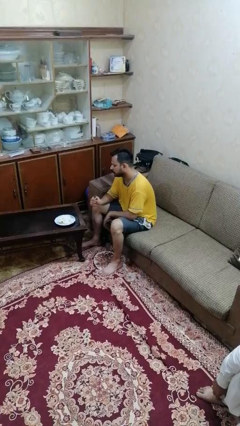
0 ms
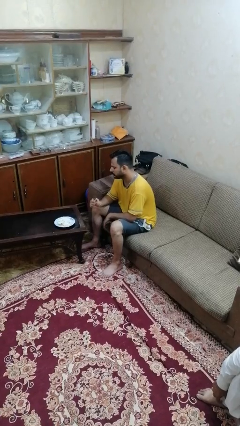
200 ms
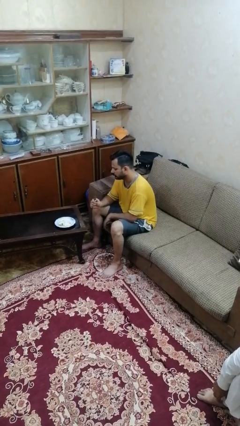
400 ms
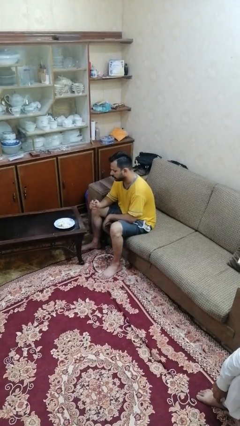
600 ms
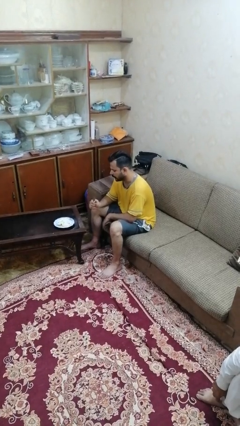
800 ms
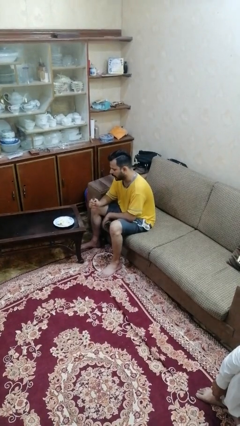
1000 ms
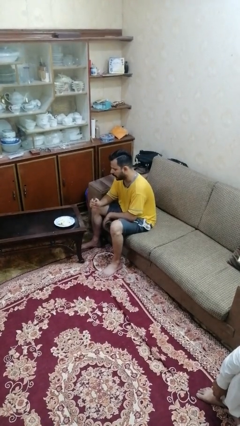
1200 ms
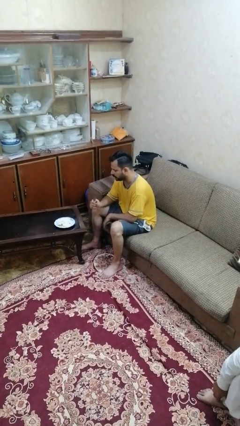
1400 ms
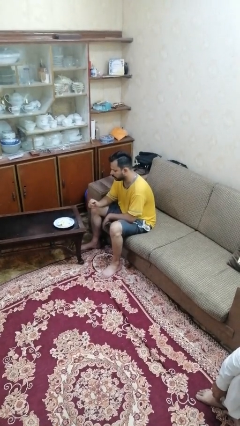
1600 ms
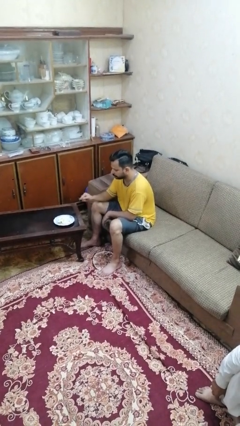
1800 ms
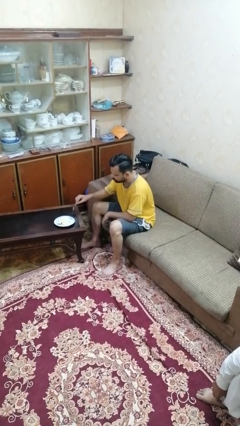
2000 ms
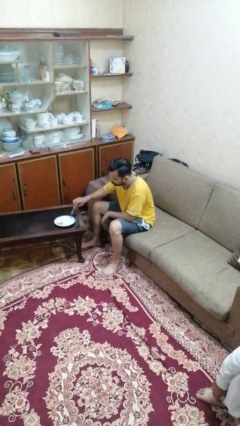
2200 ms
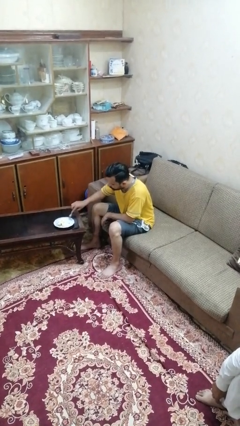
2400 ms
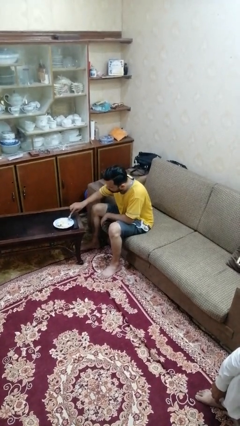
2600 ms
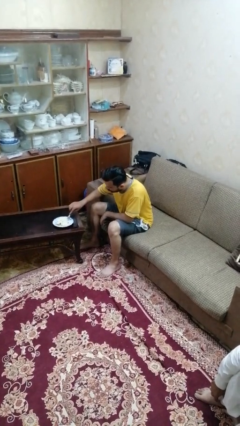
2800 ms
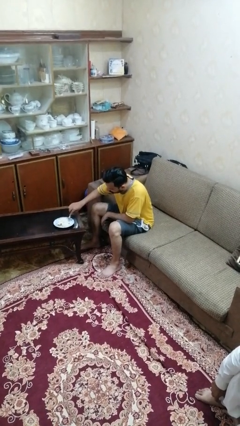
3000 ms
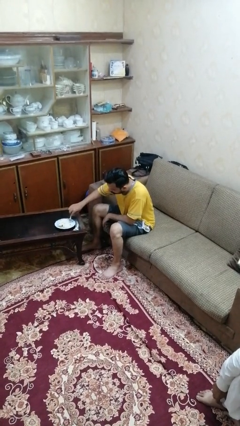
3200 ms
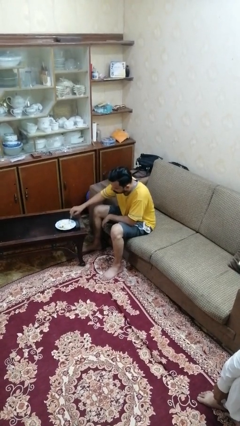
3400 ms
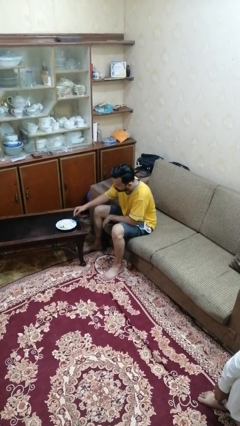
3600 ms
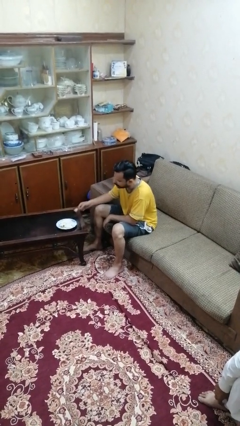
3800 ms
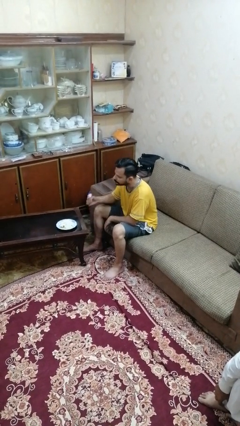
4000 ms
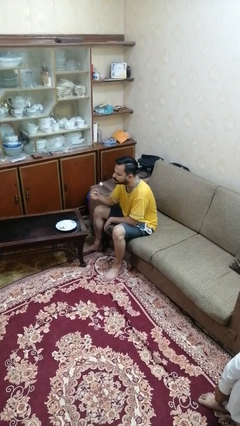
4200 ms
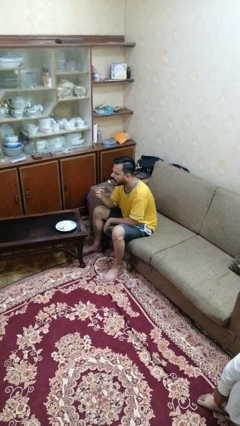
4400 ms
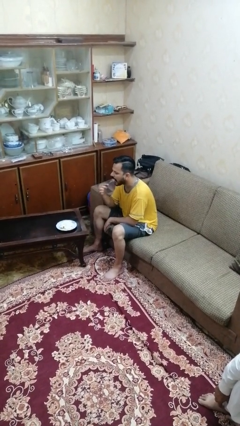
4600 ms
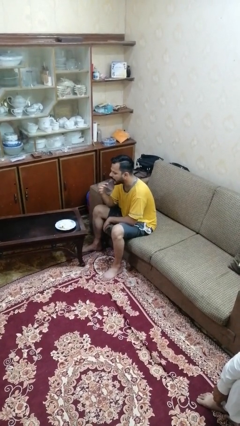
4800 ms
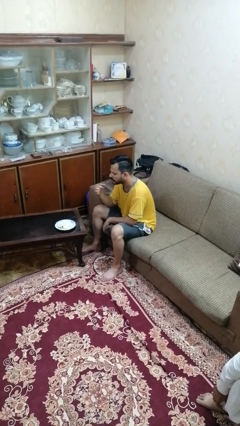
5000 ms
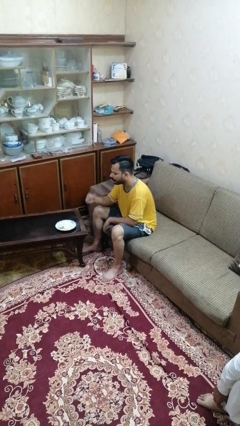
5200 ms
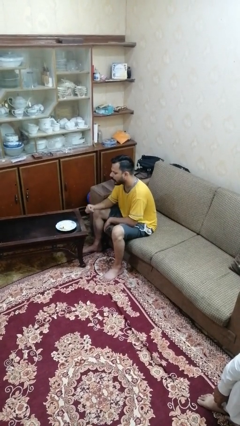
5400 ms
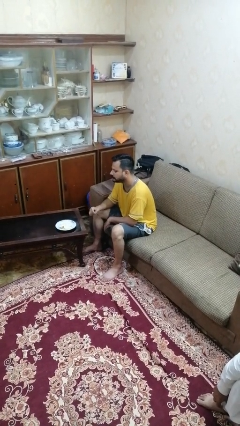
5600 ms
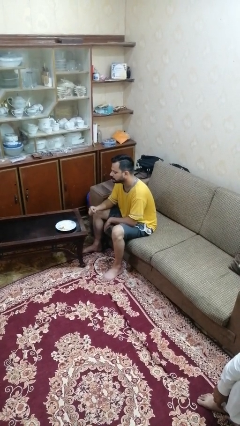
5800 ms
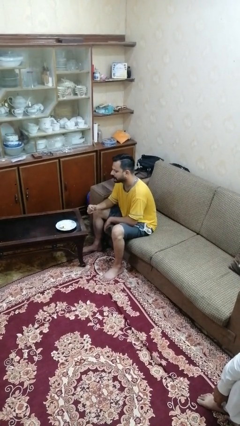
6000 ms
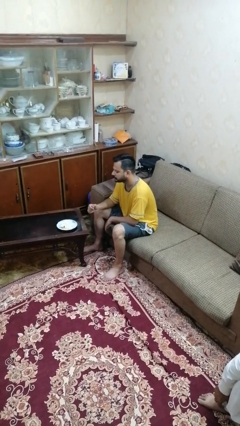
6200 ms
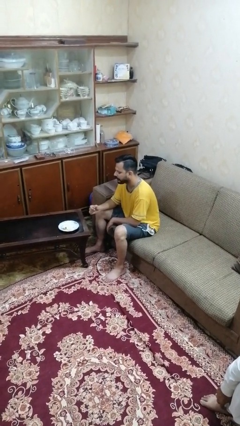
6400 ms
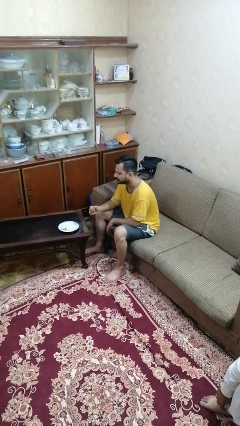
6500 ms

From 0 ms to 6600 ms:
person eats with utensil

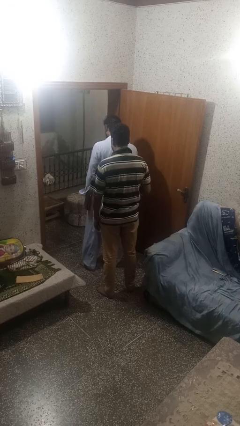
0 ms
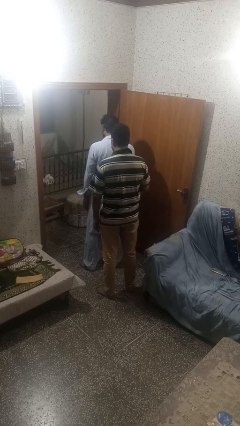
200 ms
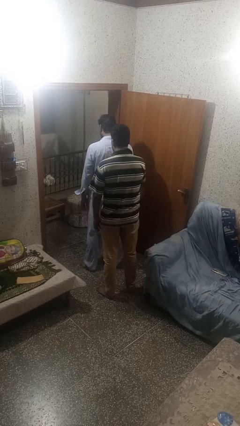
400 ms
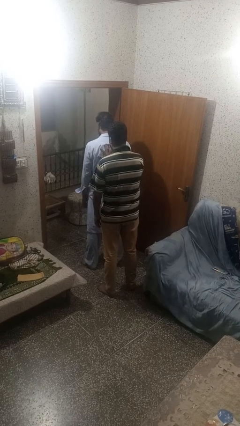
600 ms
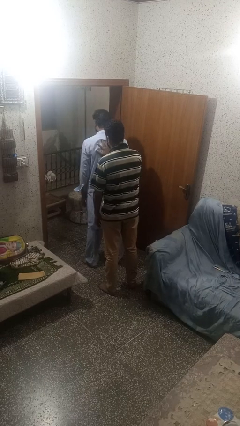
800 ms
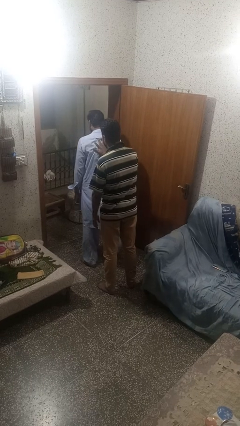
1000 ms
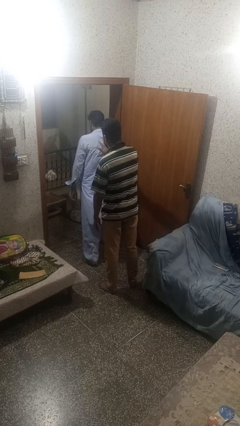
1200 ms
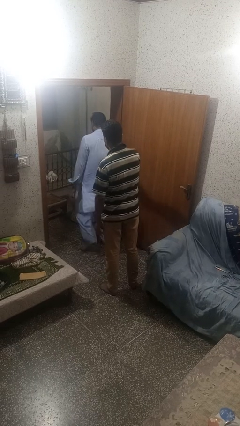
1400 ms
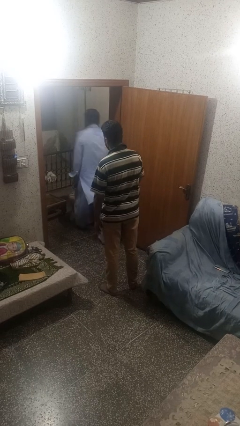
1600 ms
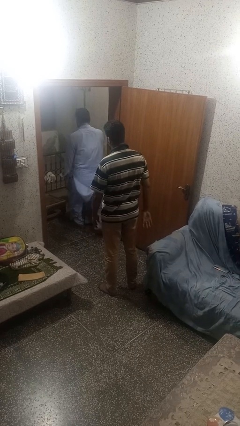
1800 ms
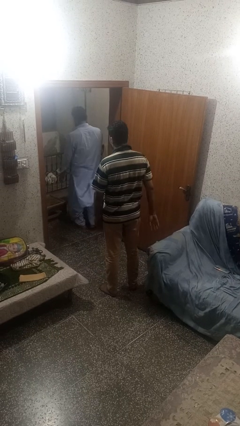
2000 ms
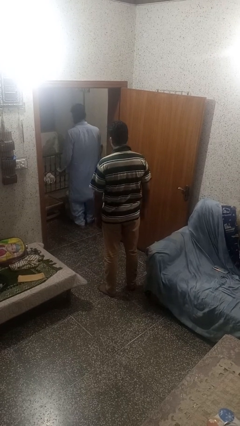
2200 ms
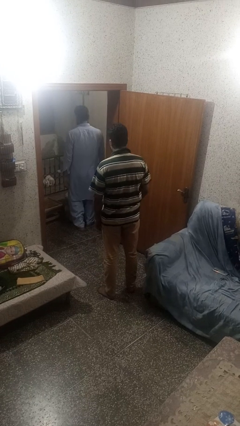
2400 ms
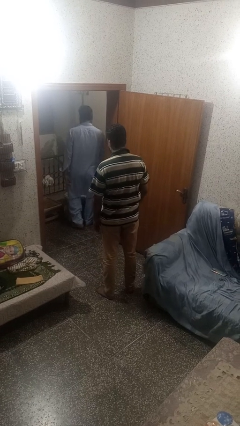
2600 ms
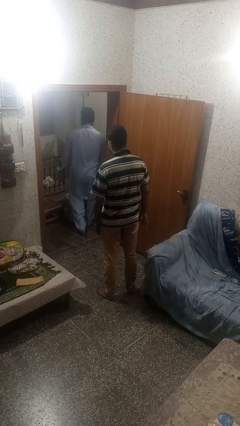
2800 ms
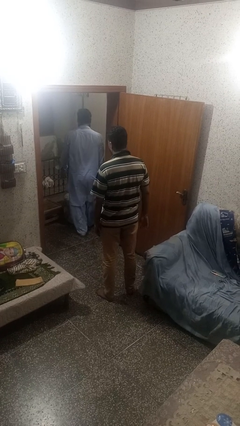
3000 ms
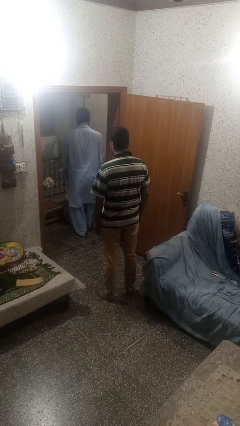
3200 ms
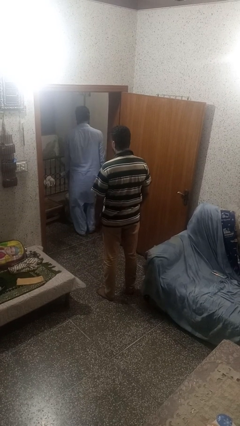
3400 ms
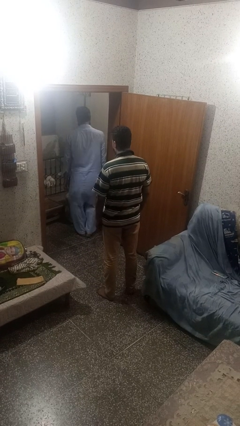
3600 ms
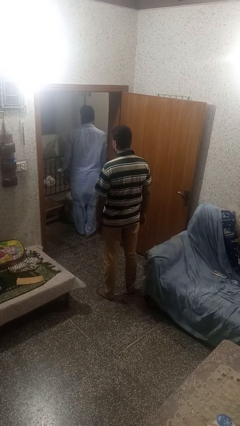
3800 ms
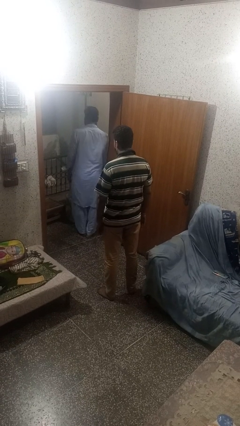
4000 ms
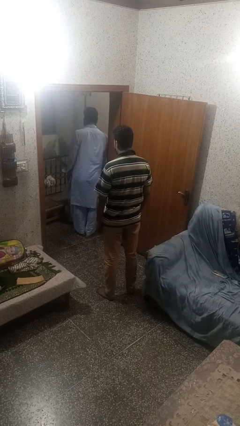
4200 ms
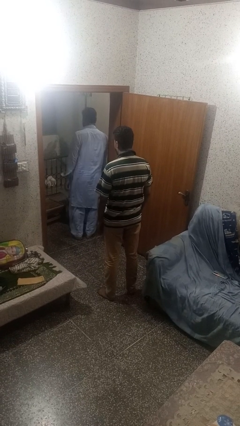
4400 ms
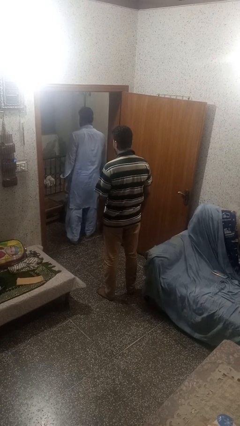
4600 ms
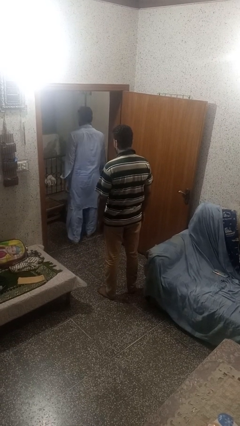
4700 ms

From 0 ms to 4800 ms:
person shoves person

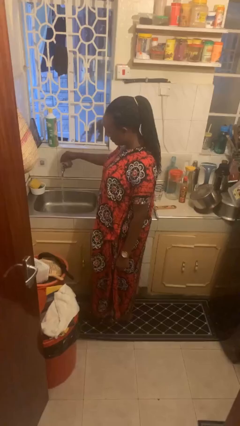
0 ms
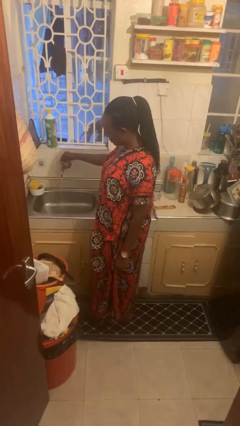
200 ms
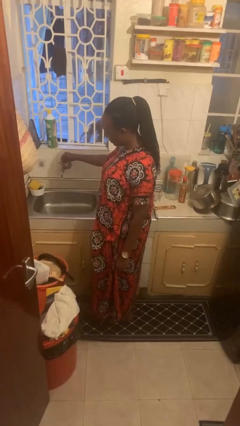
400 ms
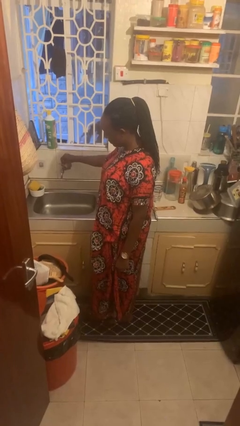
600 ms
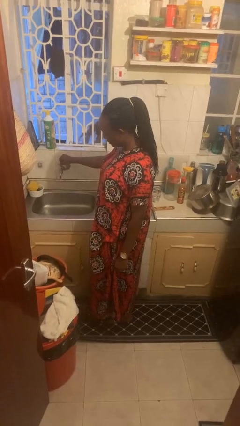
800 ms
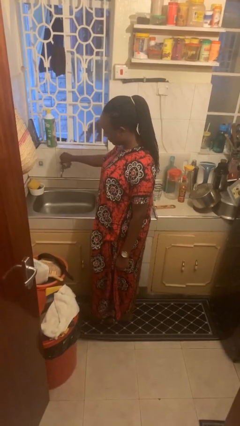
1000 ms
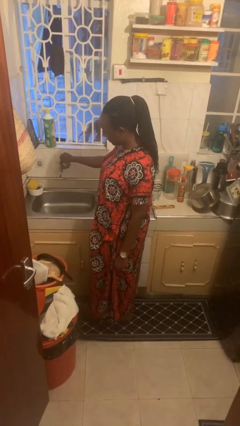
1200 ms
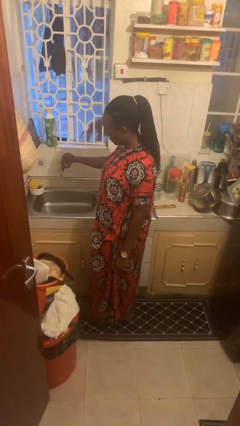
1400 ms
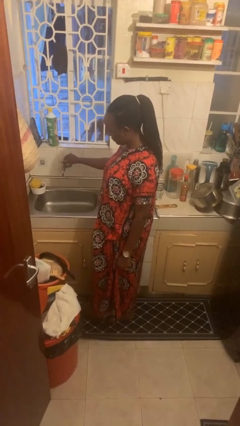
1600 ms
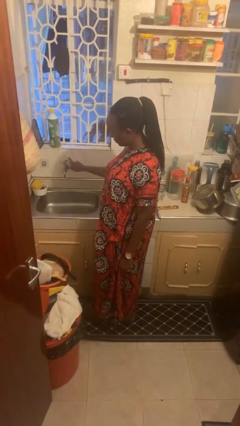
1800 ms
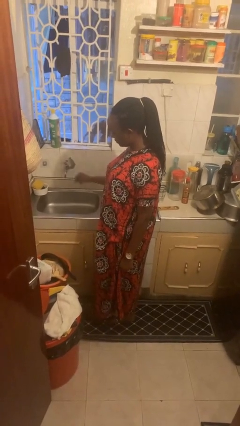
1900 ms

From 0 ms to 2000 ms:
person turns off faucet

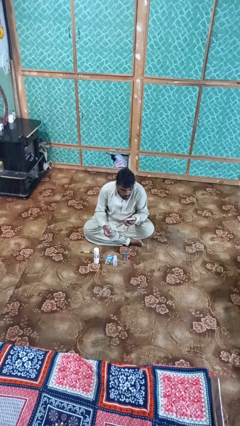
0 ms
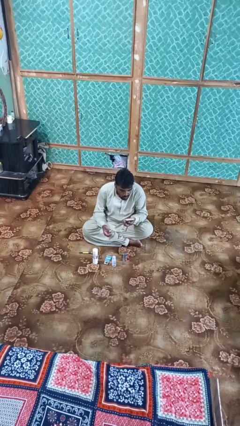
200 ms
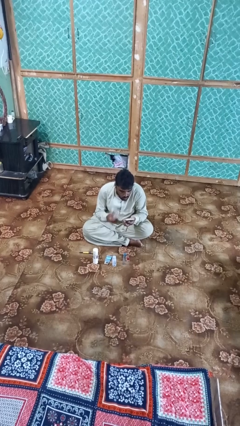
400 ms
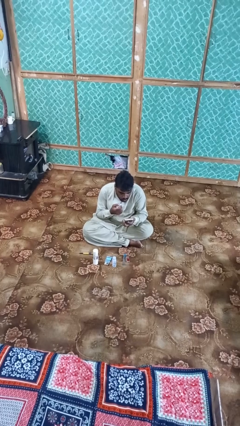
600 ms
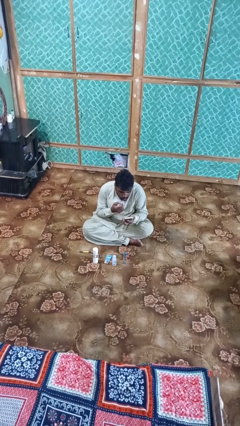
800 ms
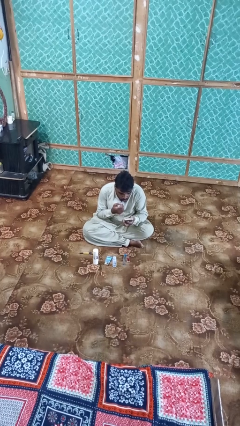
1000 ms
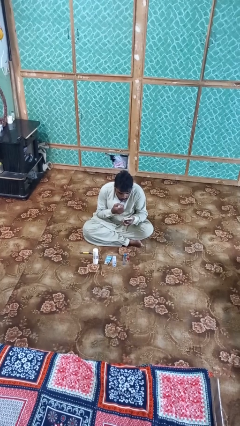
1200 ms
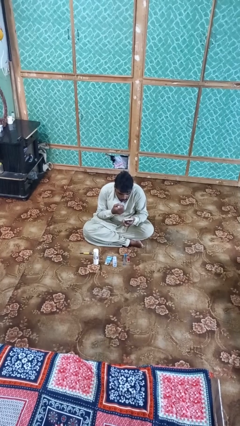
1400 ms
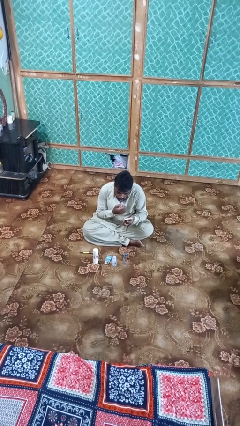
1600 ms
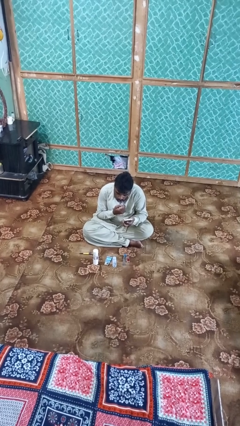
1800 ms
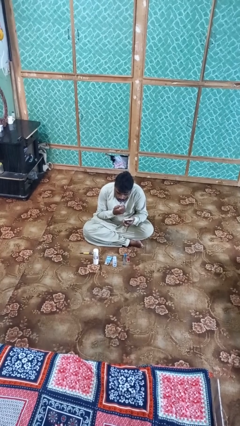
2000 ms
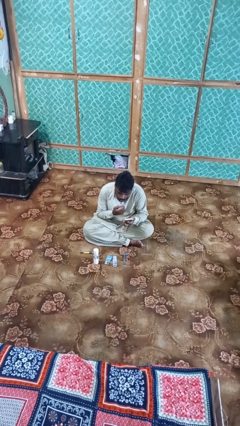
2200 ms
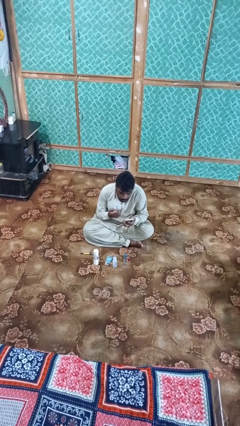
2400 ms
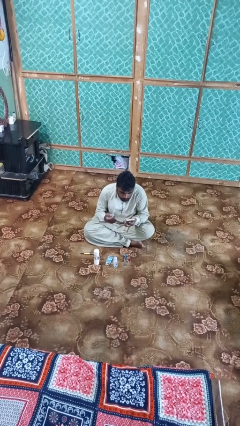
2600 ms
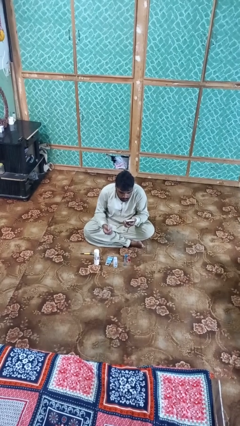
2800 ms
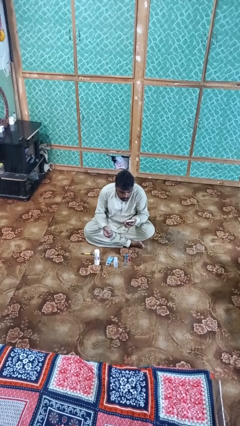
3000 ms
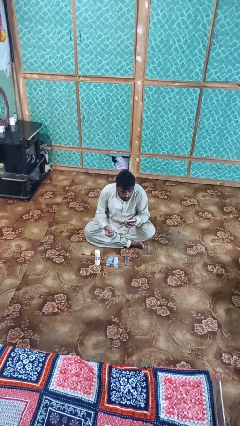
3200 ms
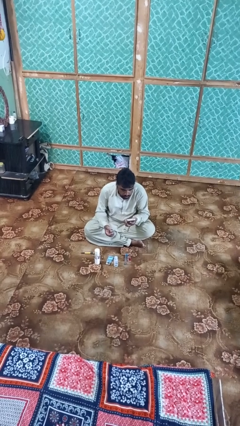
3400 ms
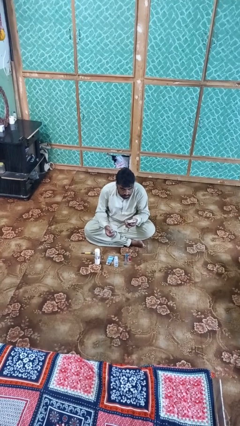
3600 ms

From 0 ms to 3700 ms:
person applies lip makeup

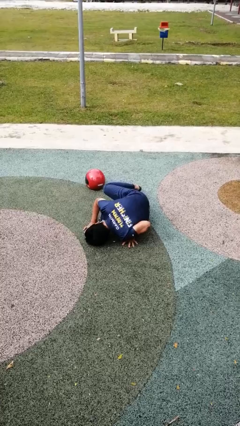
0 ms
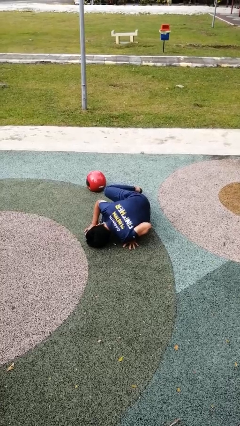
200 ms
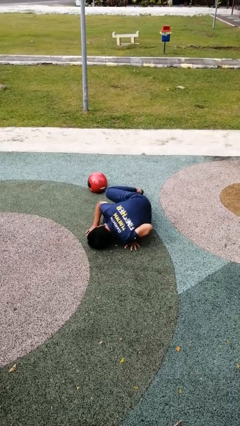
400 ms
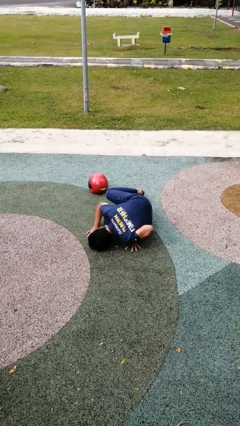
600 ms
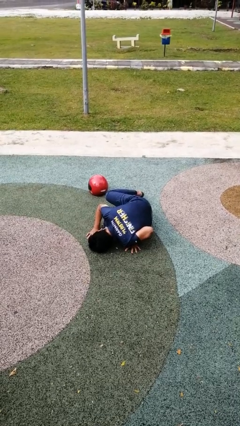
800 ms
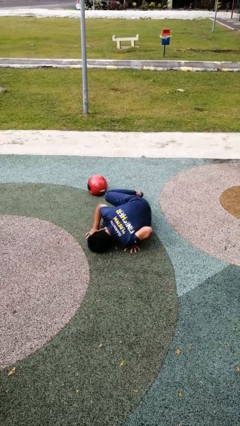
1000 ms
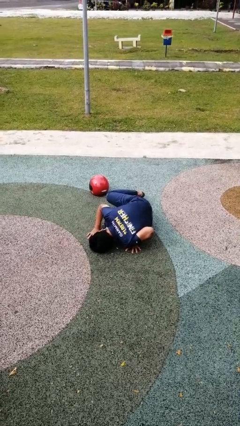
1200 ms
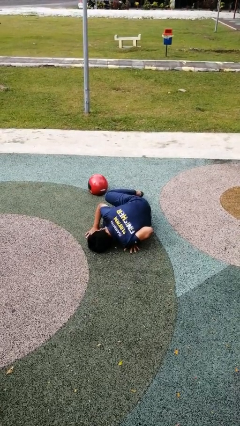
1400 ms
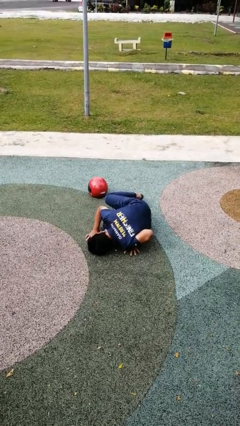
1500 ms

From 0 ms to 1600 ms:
person lies down on floor
